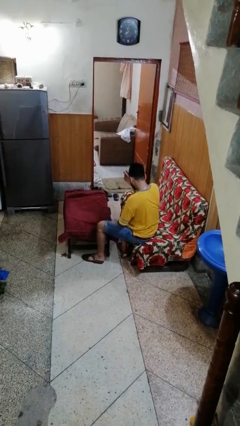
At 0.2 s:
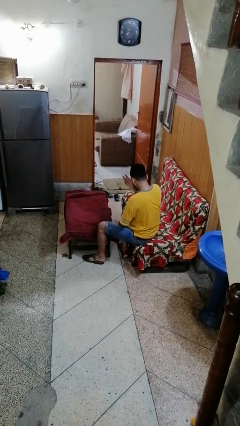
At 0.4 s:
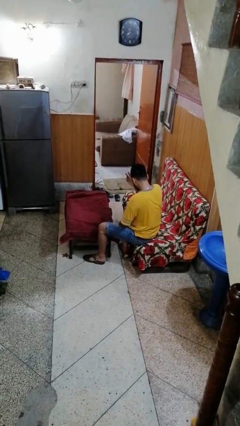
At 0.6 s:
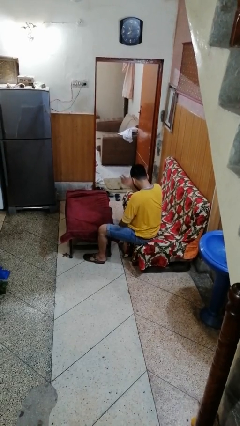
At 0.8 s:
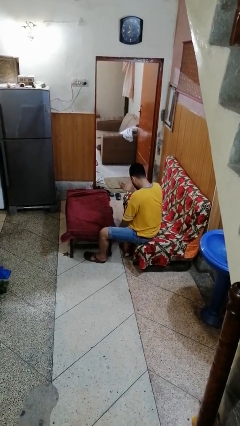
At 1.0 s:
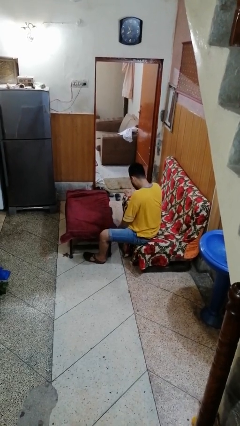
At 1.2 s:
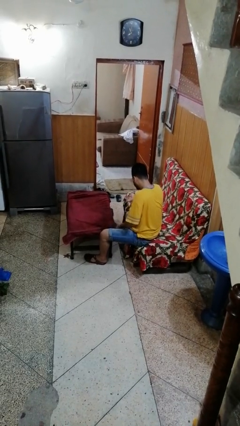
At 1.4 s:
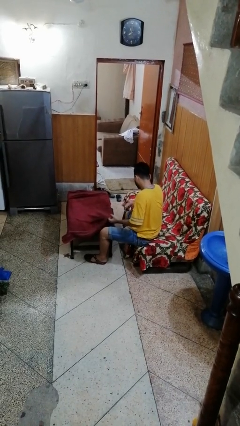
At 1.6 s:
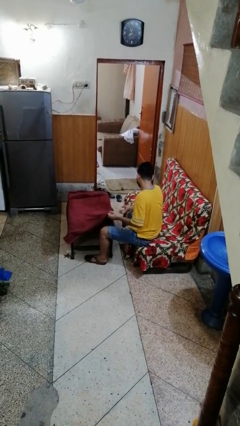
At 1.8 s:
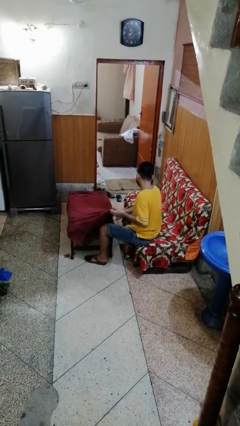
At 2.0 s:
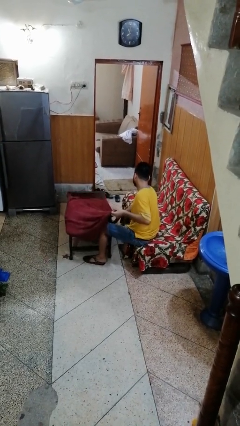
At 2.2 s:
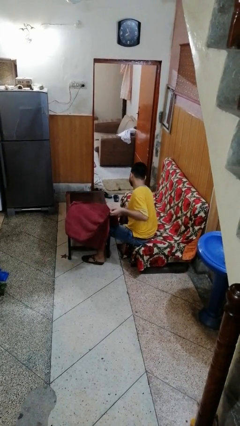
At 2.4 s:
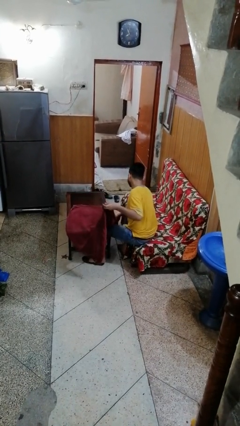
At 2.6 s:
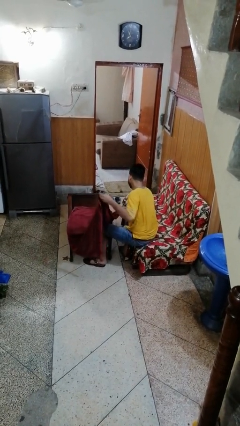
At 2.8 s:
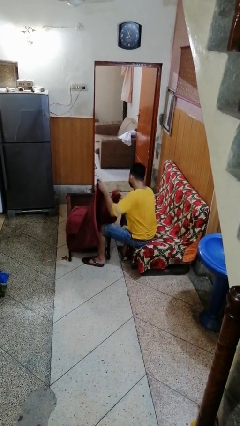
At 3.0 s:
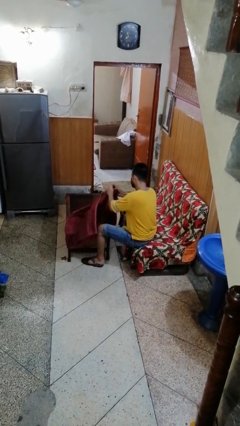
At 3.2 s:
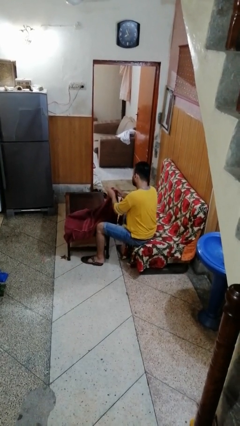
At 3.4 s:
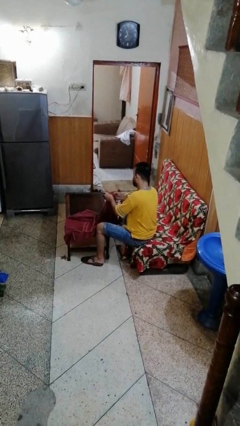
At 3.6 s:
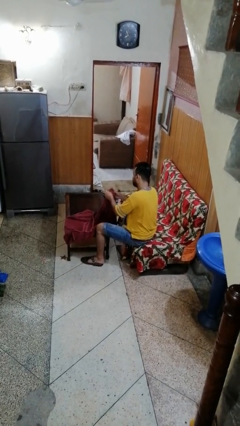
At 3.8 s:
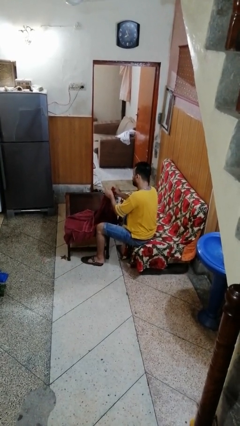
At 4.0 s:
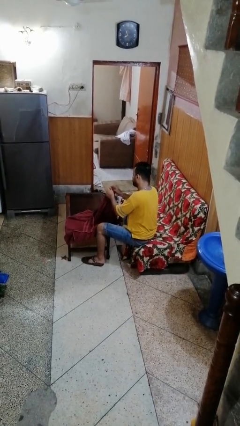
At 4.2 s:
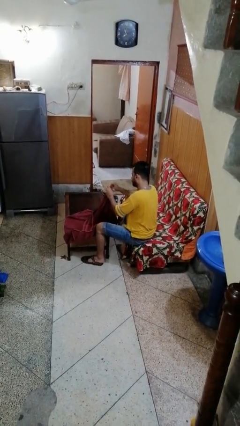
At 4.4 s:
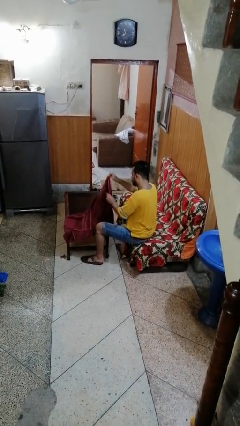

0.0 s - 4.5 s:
person folds tablecloth

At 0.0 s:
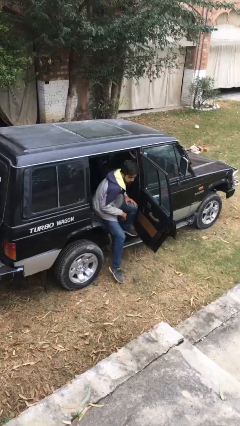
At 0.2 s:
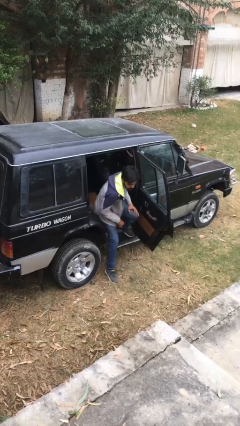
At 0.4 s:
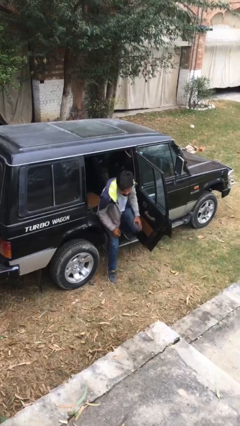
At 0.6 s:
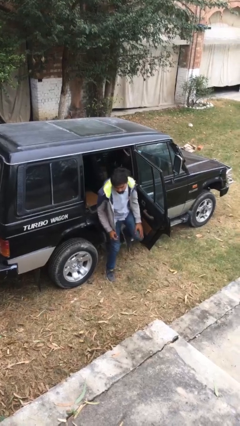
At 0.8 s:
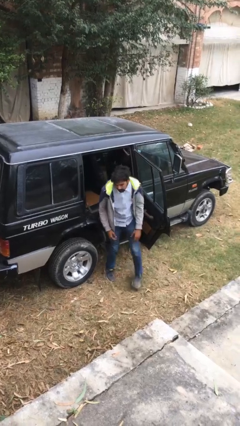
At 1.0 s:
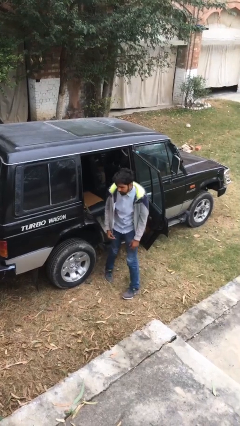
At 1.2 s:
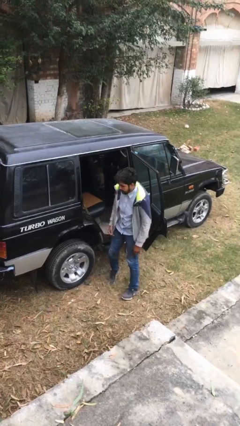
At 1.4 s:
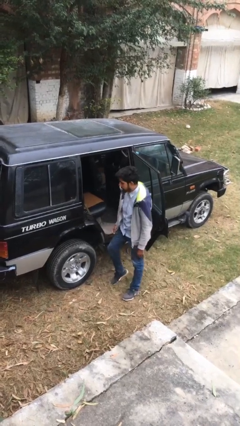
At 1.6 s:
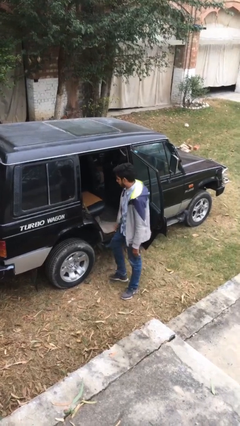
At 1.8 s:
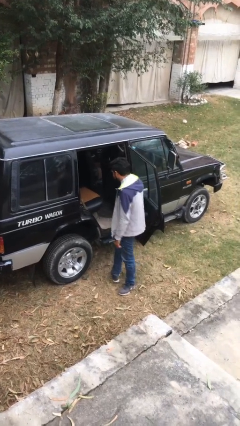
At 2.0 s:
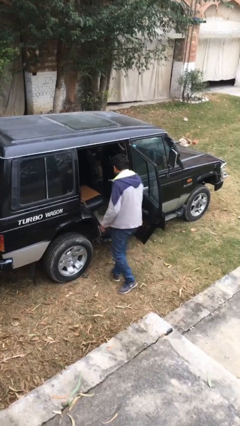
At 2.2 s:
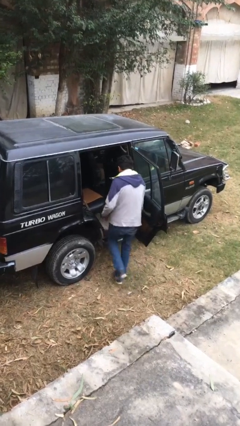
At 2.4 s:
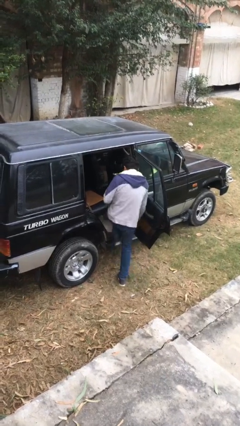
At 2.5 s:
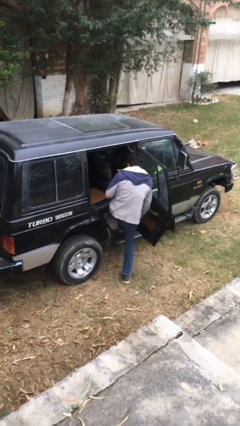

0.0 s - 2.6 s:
person exits car

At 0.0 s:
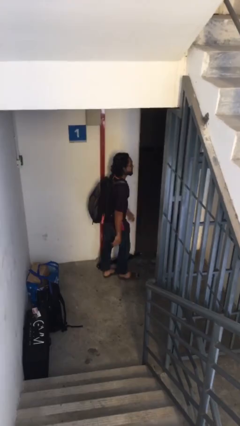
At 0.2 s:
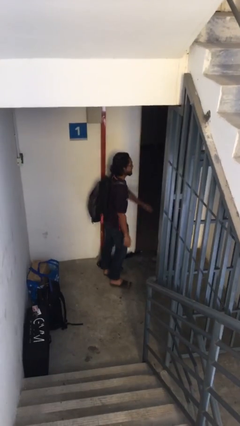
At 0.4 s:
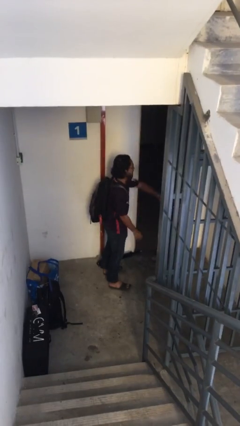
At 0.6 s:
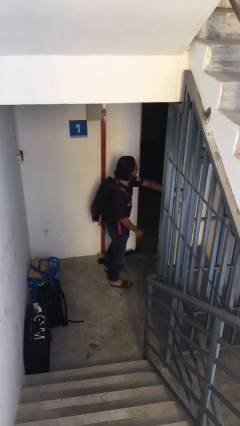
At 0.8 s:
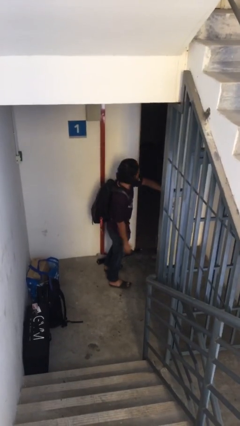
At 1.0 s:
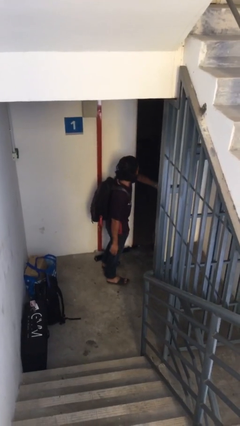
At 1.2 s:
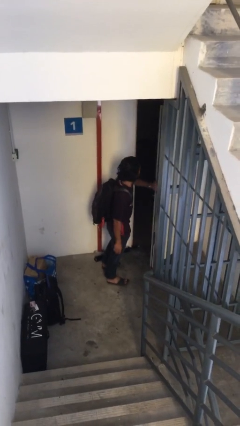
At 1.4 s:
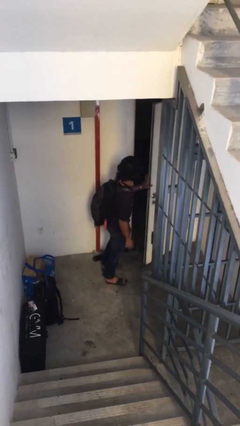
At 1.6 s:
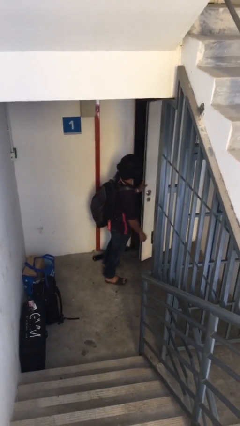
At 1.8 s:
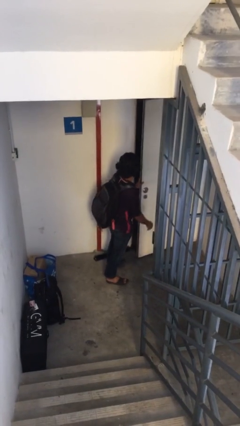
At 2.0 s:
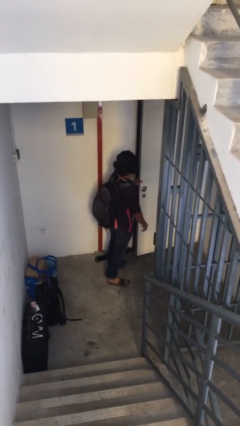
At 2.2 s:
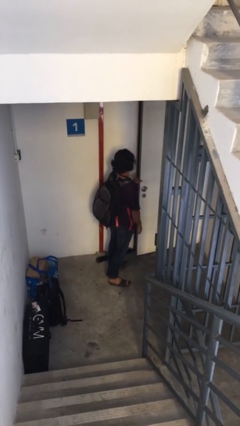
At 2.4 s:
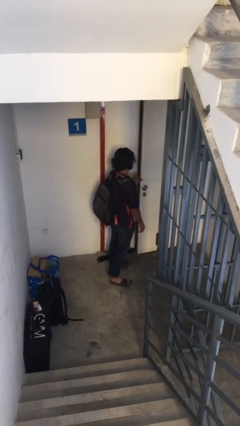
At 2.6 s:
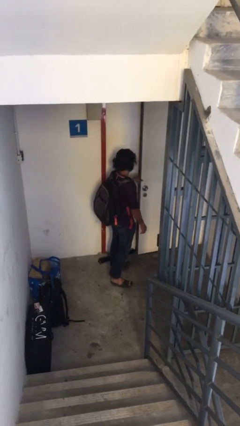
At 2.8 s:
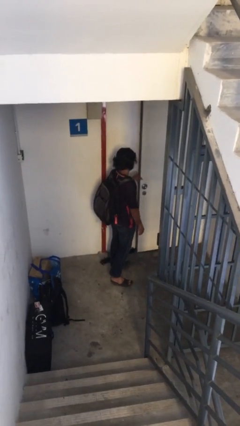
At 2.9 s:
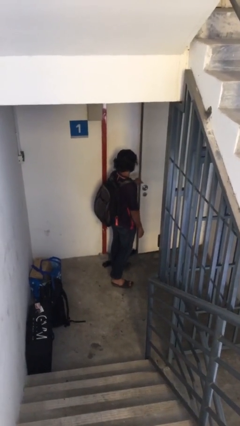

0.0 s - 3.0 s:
person closes facility door

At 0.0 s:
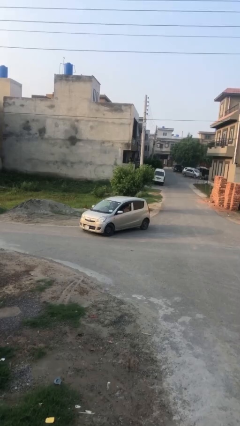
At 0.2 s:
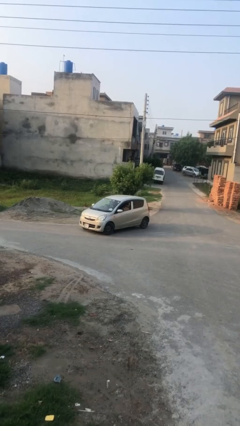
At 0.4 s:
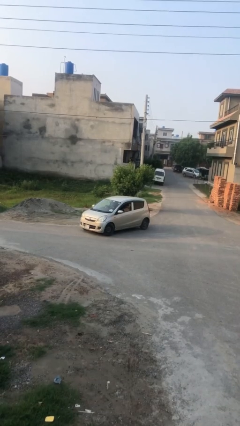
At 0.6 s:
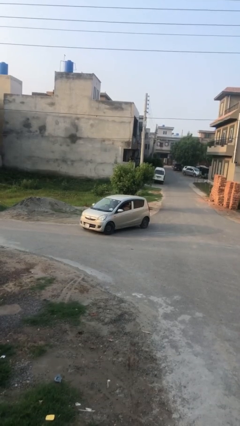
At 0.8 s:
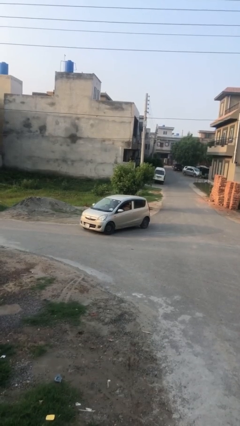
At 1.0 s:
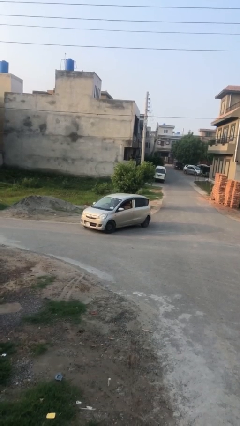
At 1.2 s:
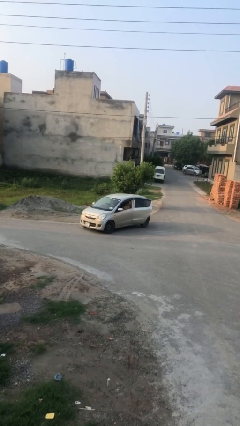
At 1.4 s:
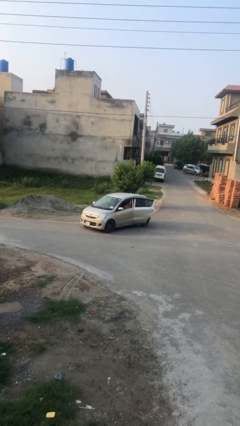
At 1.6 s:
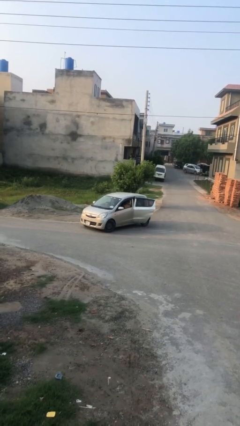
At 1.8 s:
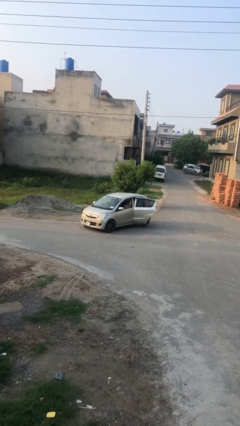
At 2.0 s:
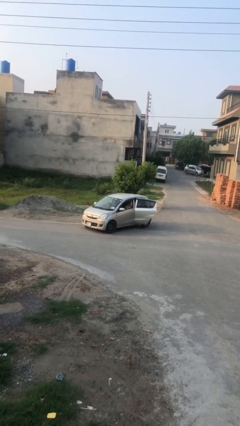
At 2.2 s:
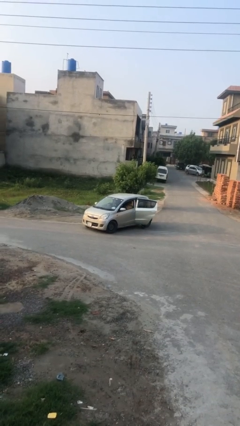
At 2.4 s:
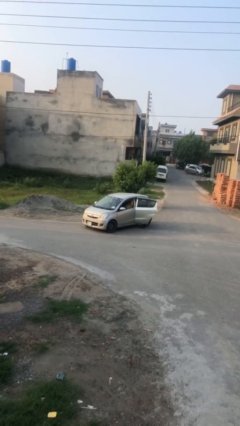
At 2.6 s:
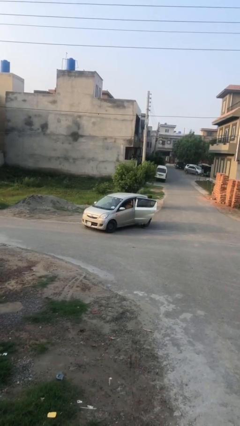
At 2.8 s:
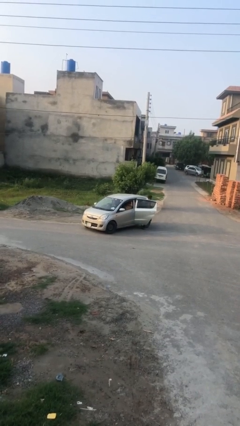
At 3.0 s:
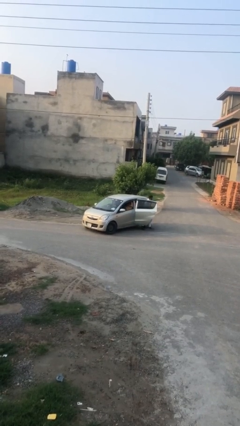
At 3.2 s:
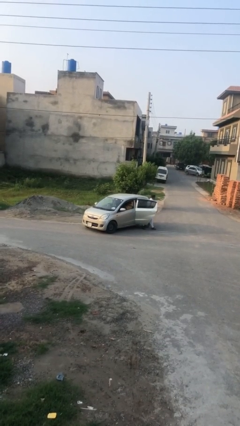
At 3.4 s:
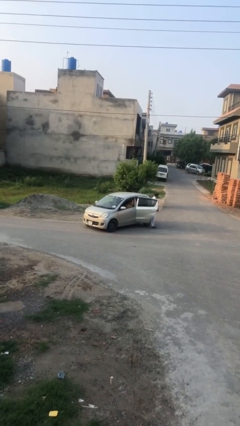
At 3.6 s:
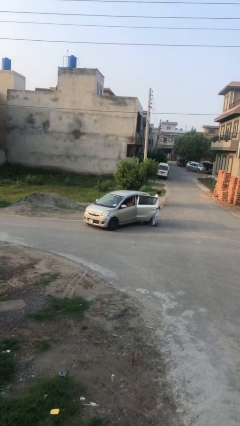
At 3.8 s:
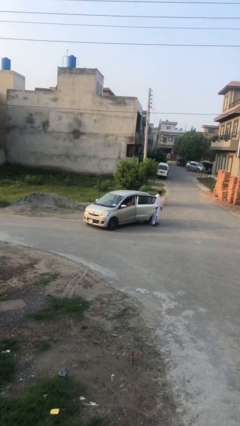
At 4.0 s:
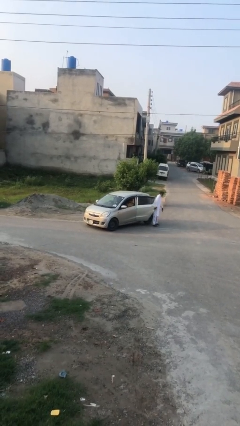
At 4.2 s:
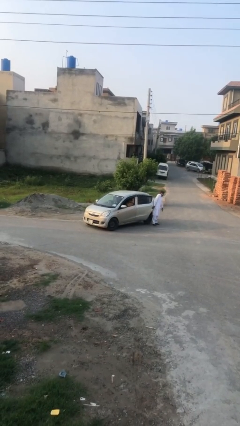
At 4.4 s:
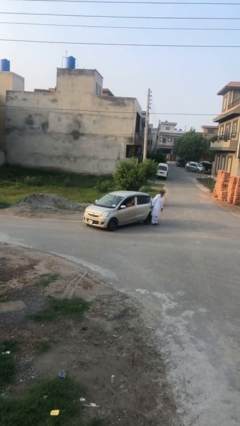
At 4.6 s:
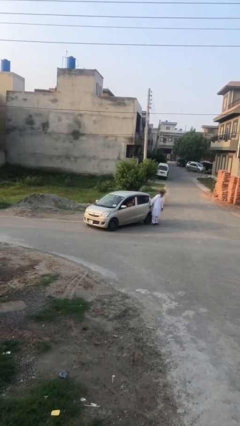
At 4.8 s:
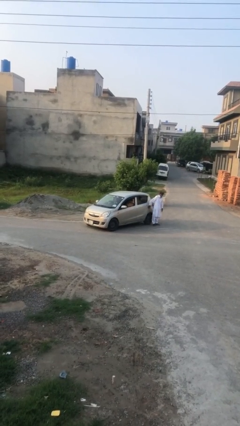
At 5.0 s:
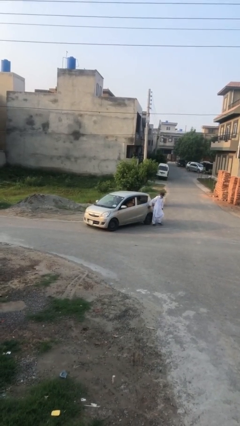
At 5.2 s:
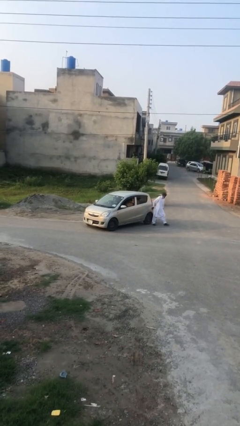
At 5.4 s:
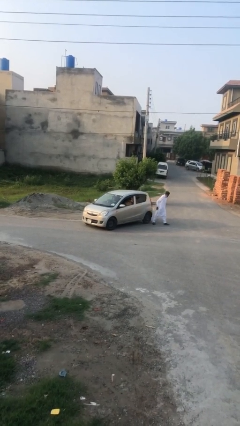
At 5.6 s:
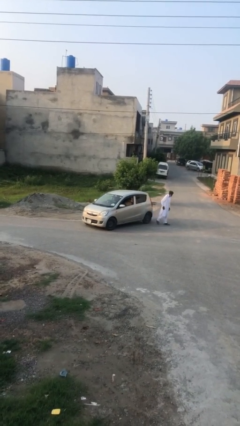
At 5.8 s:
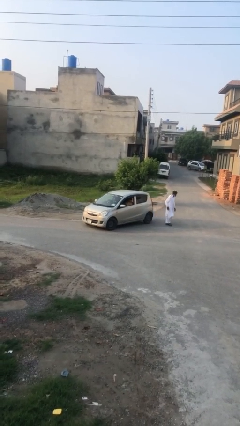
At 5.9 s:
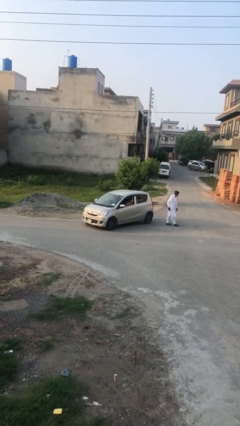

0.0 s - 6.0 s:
car drops off person

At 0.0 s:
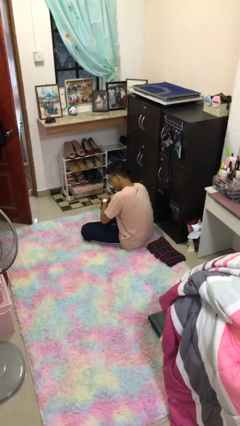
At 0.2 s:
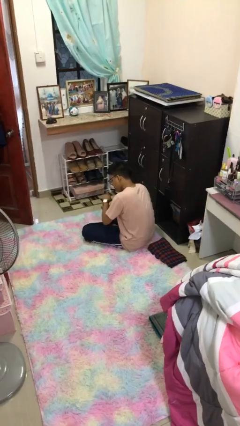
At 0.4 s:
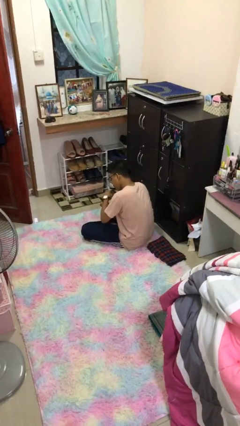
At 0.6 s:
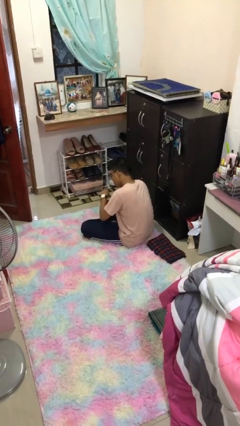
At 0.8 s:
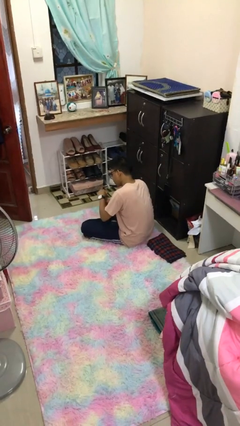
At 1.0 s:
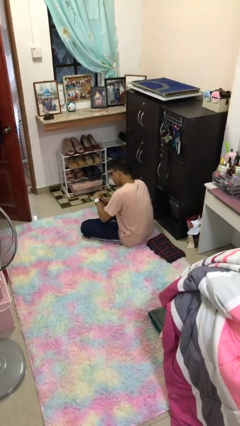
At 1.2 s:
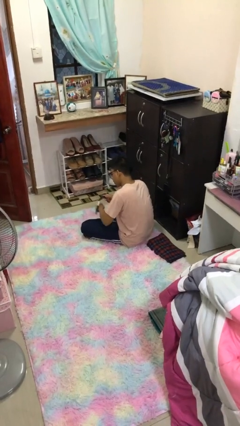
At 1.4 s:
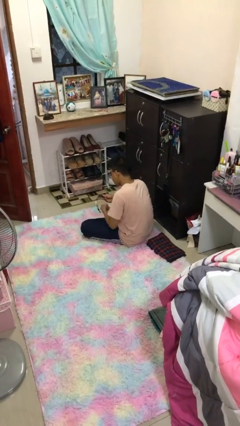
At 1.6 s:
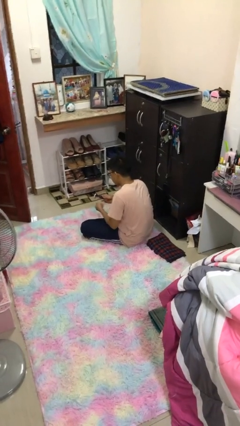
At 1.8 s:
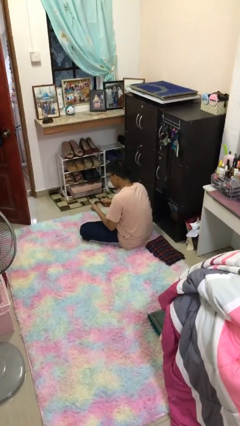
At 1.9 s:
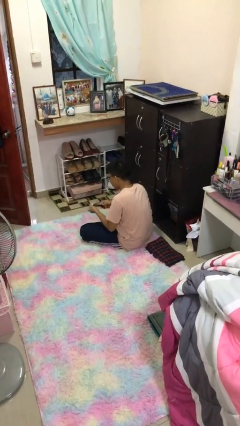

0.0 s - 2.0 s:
person takes off wristwatch
